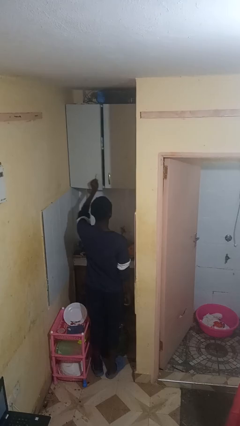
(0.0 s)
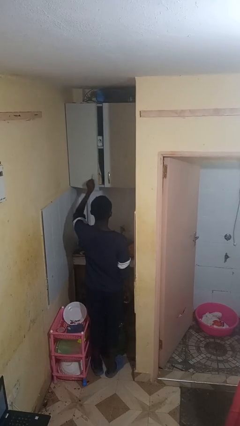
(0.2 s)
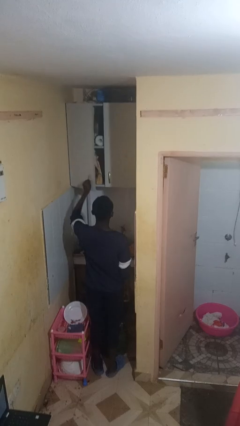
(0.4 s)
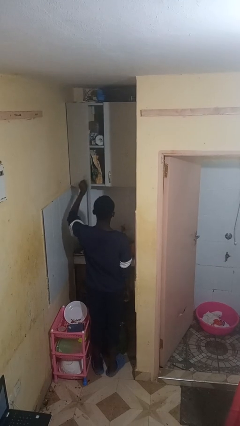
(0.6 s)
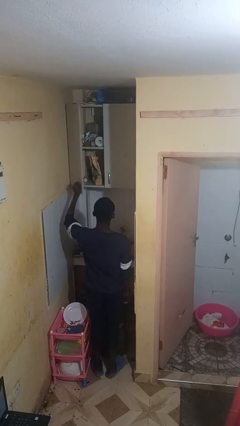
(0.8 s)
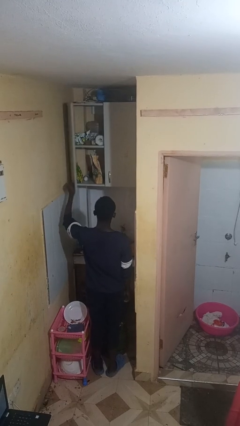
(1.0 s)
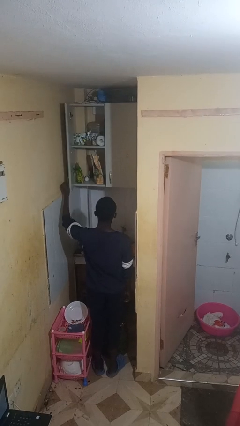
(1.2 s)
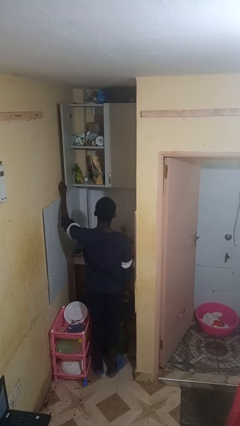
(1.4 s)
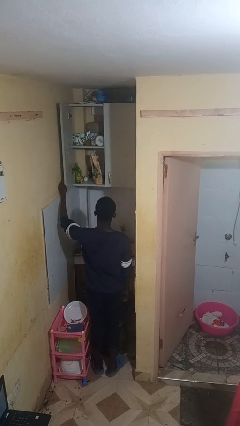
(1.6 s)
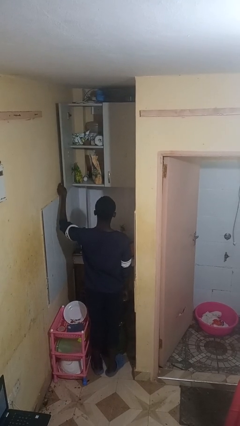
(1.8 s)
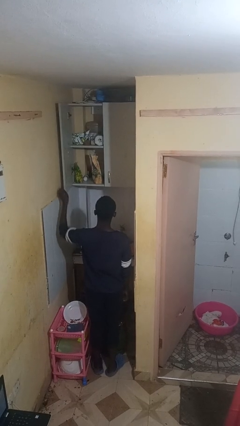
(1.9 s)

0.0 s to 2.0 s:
person opens cabinet

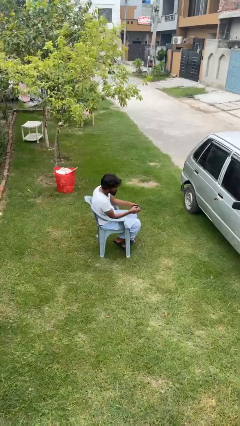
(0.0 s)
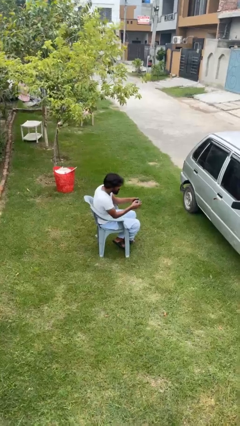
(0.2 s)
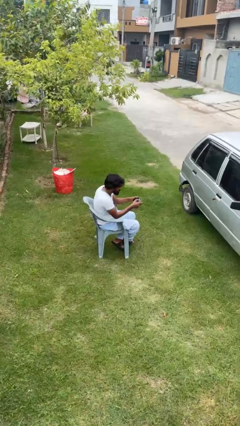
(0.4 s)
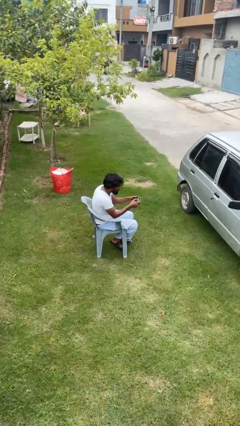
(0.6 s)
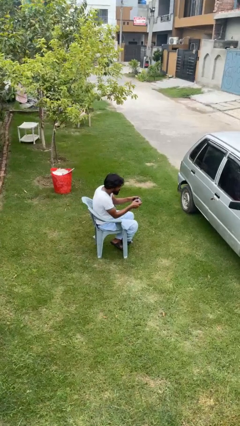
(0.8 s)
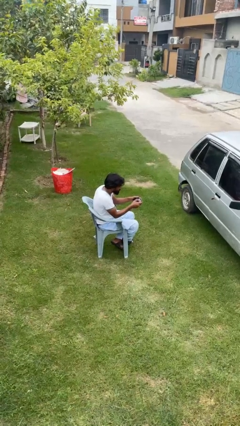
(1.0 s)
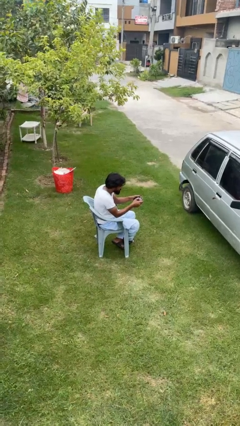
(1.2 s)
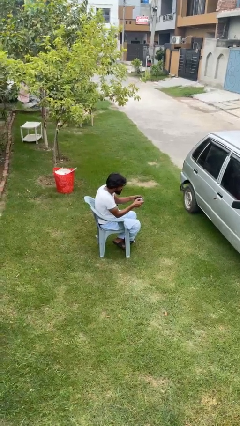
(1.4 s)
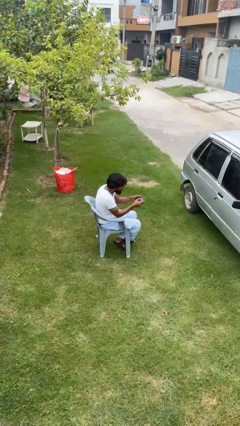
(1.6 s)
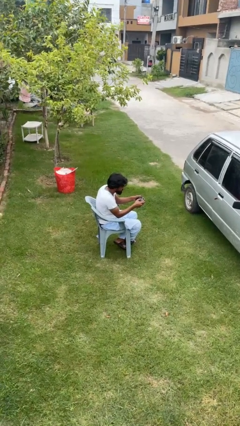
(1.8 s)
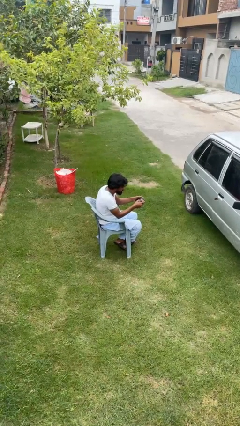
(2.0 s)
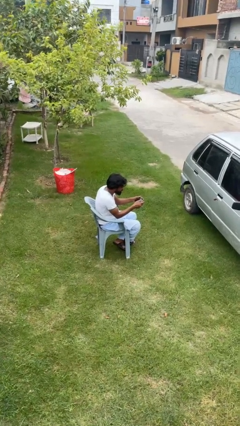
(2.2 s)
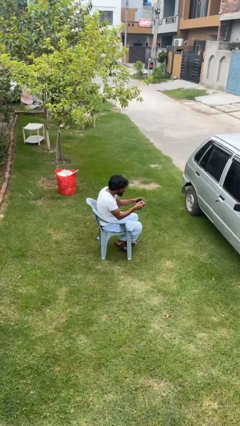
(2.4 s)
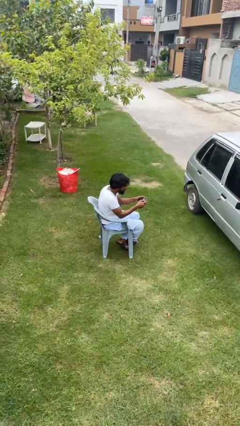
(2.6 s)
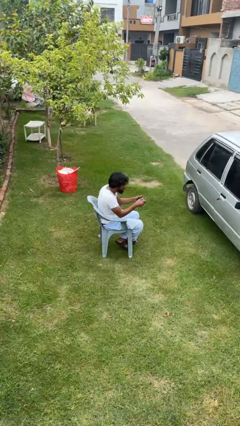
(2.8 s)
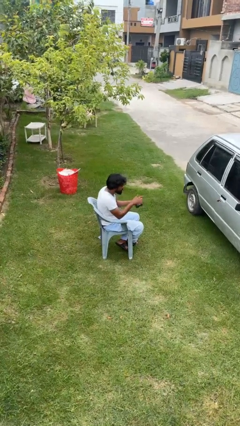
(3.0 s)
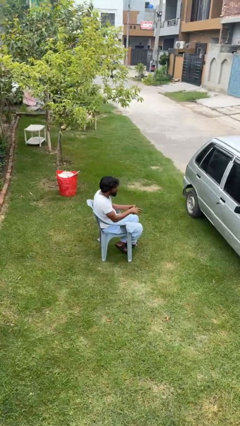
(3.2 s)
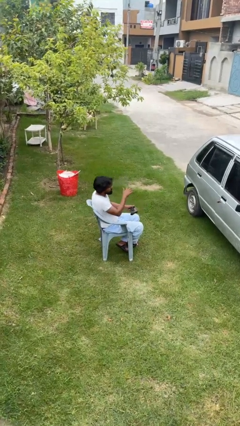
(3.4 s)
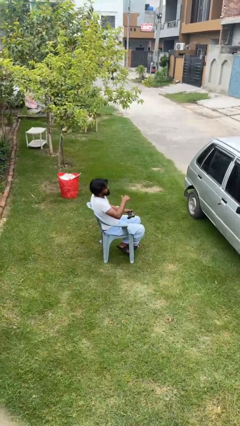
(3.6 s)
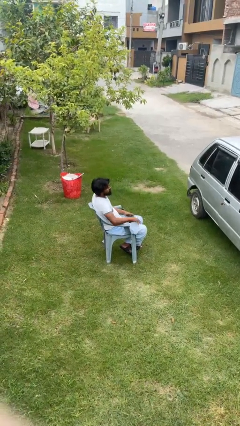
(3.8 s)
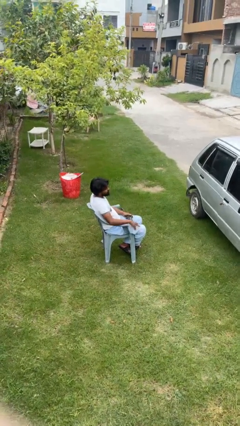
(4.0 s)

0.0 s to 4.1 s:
person interacts with handheld game

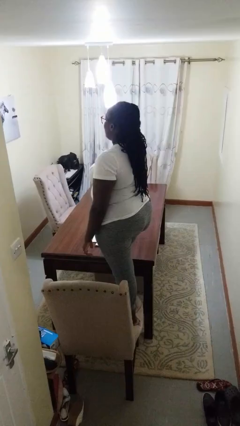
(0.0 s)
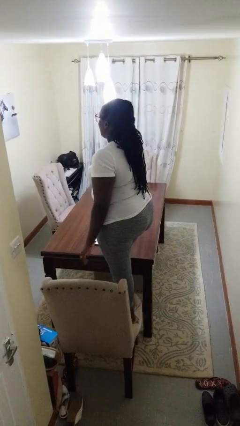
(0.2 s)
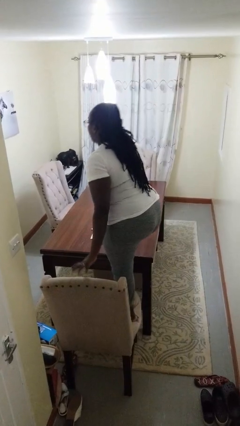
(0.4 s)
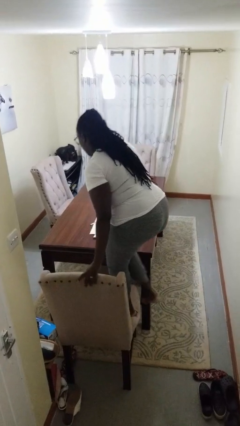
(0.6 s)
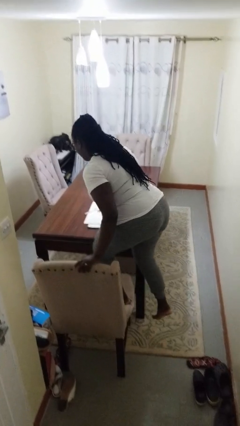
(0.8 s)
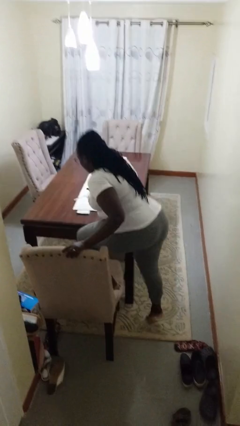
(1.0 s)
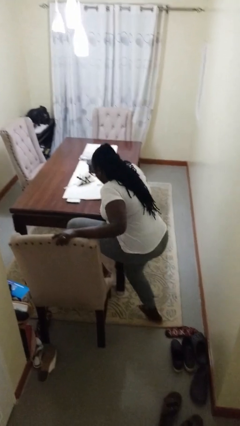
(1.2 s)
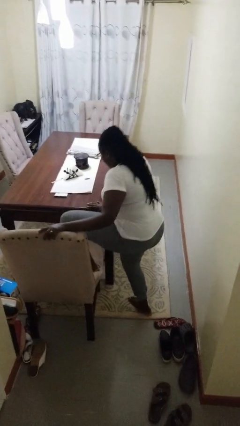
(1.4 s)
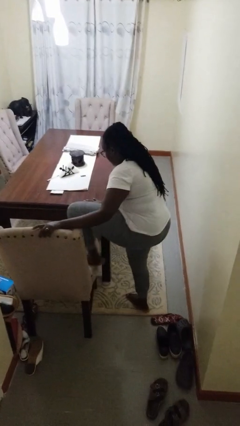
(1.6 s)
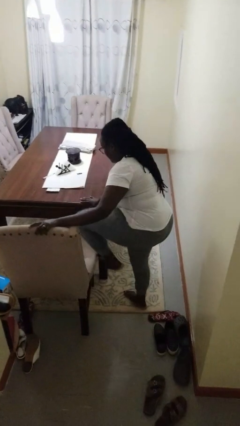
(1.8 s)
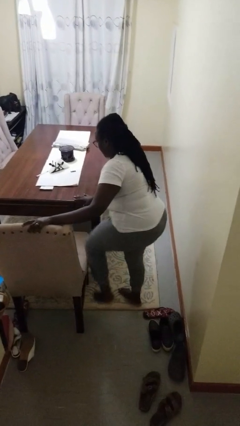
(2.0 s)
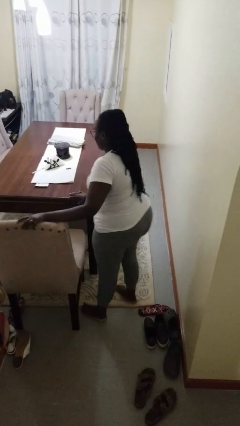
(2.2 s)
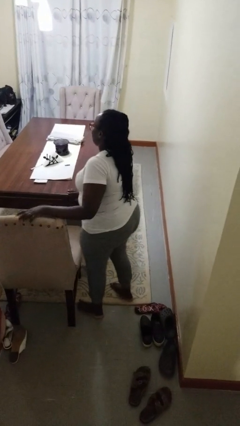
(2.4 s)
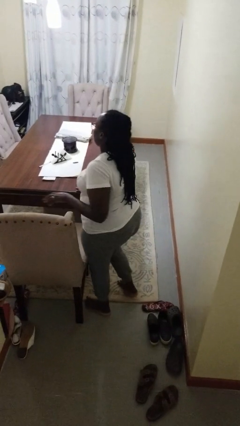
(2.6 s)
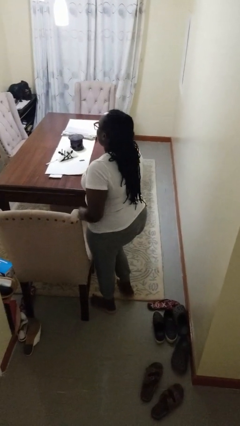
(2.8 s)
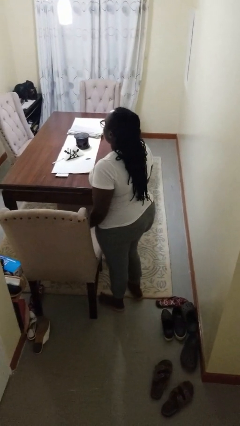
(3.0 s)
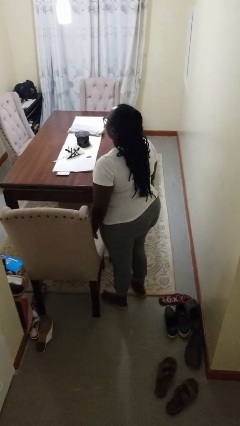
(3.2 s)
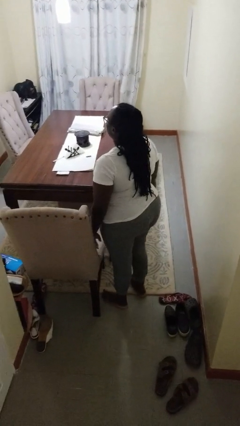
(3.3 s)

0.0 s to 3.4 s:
person climbs off chair

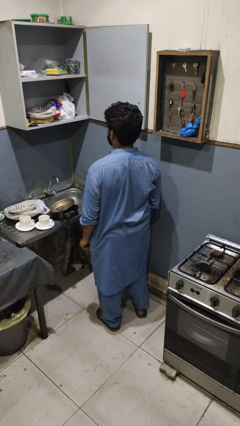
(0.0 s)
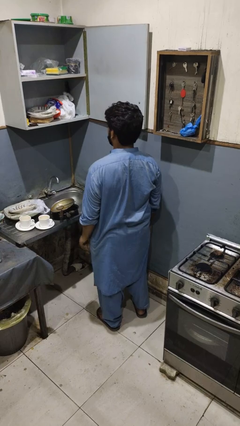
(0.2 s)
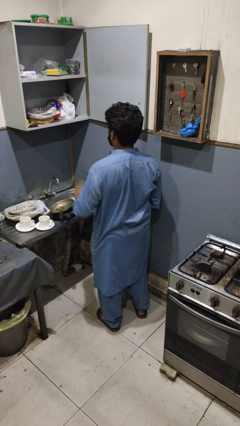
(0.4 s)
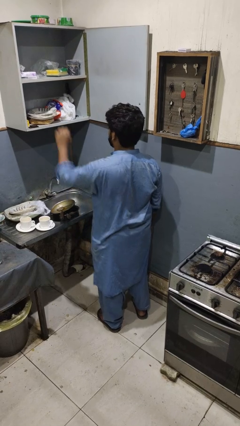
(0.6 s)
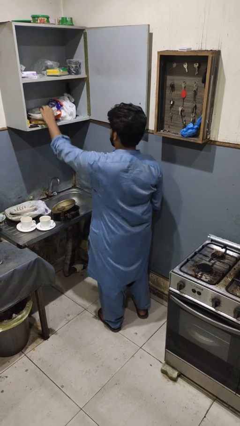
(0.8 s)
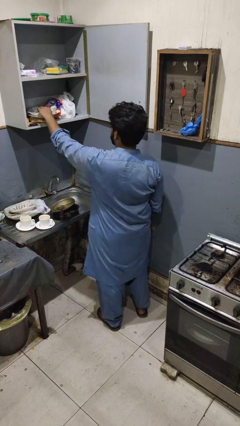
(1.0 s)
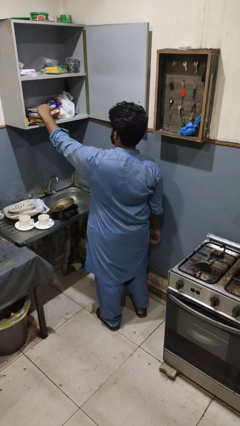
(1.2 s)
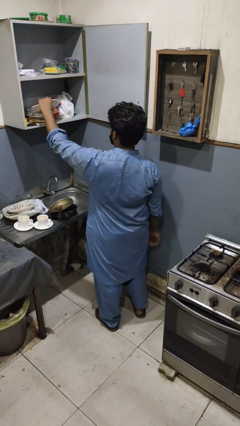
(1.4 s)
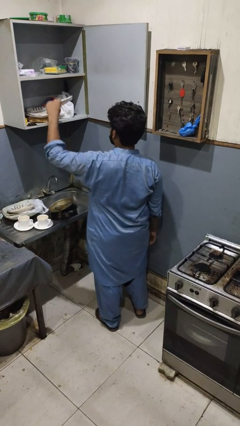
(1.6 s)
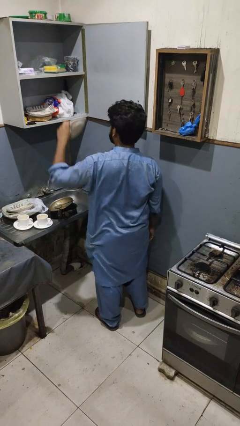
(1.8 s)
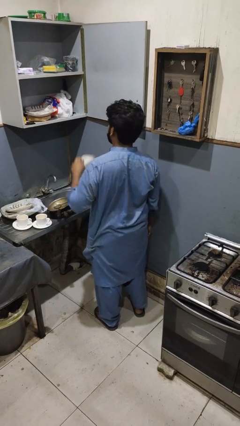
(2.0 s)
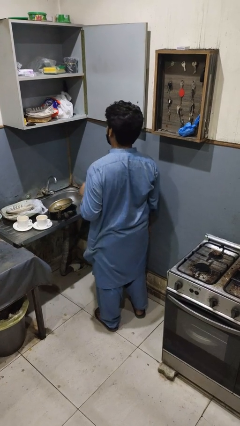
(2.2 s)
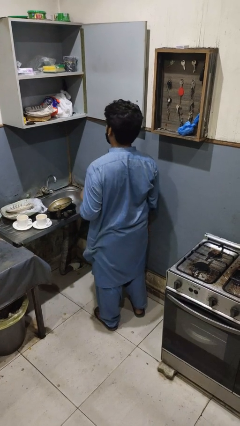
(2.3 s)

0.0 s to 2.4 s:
person takes object from cabinet

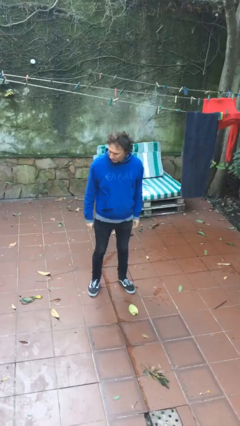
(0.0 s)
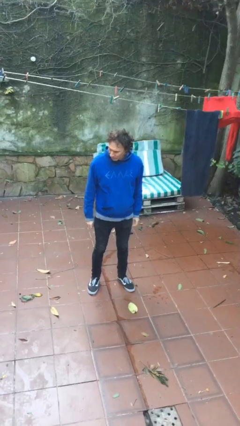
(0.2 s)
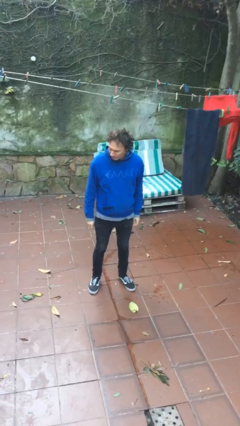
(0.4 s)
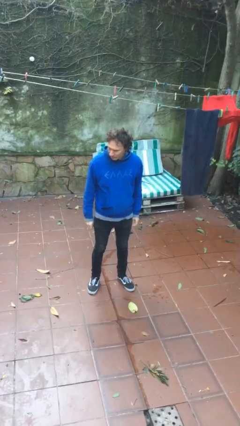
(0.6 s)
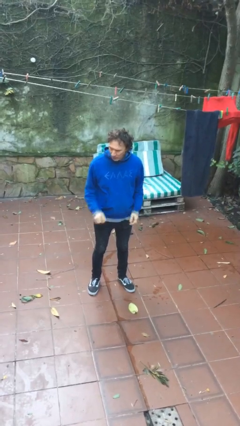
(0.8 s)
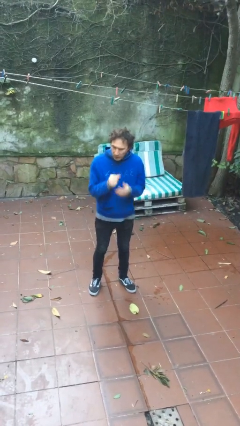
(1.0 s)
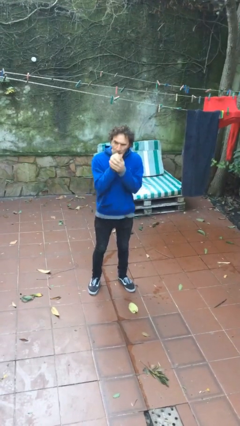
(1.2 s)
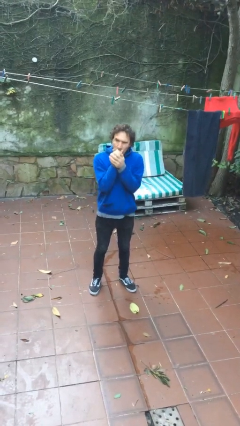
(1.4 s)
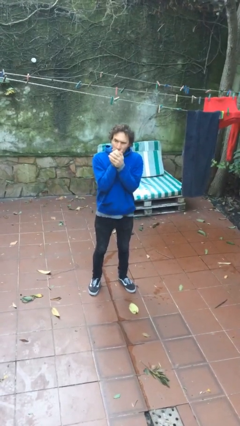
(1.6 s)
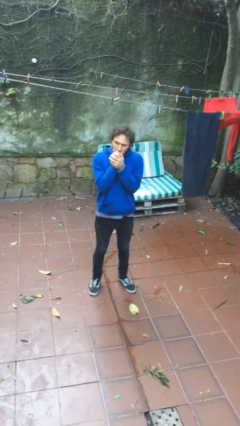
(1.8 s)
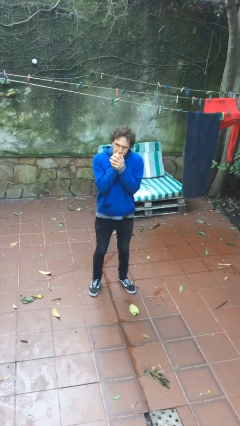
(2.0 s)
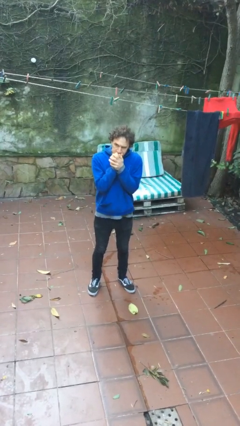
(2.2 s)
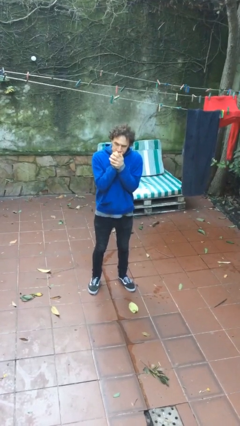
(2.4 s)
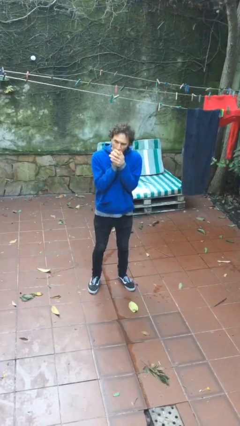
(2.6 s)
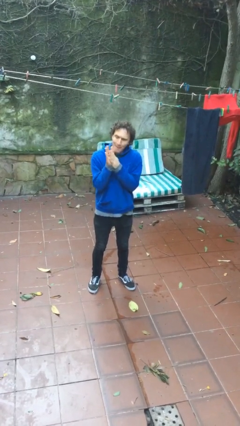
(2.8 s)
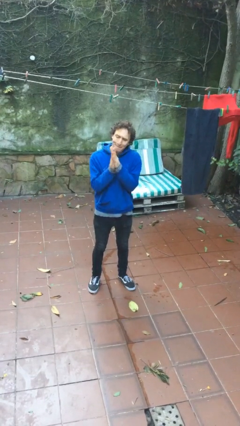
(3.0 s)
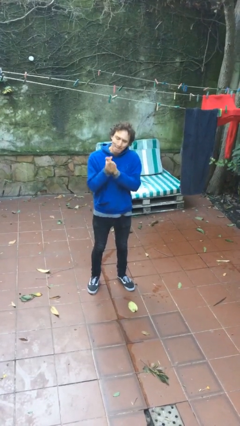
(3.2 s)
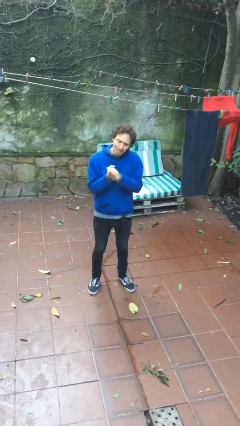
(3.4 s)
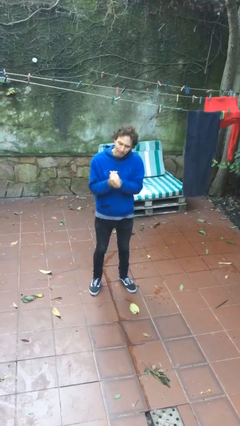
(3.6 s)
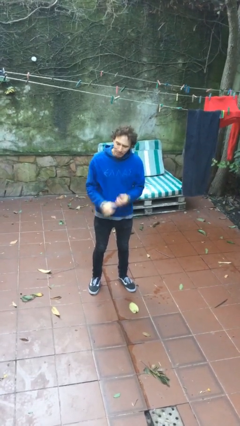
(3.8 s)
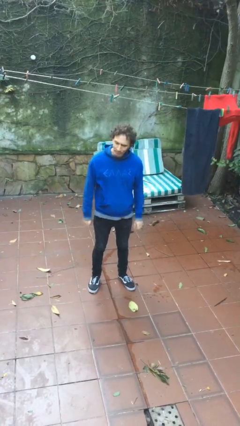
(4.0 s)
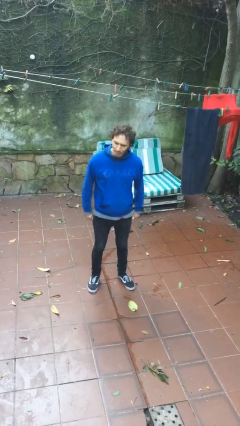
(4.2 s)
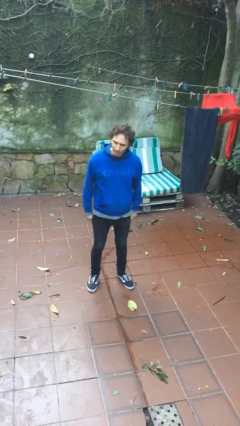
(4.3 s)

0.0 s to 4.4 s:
person blows into hands

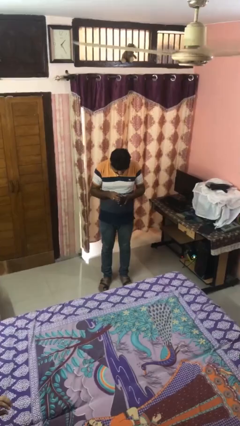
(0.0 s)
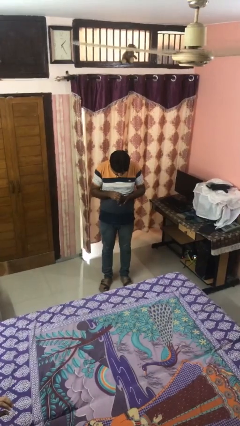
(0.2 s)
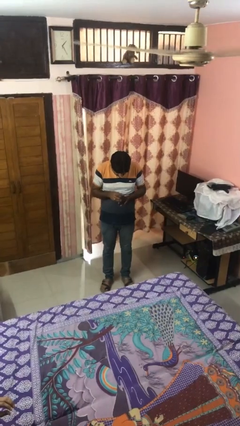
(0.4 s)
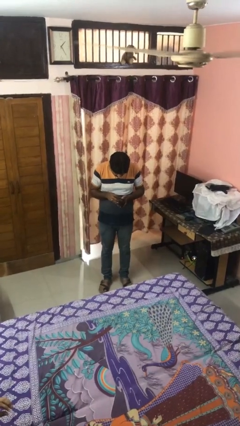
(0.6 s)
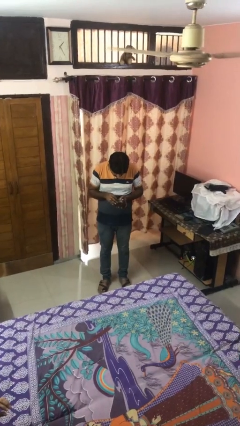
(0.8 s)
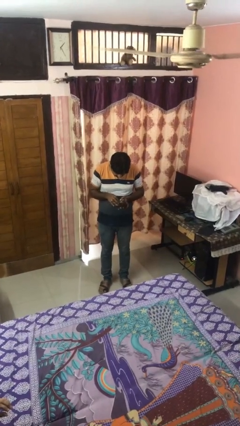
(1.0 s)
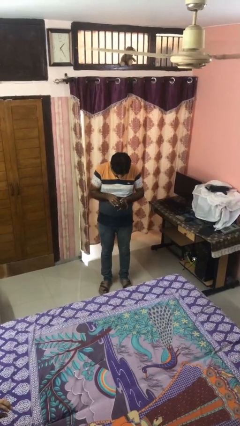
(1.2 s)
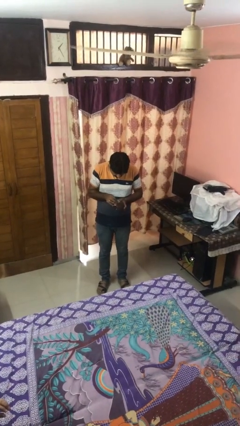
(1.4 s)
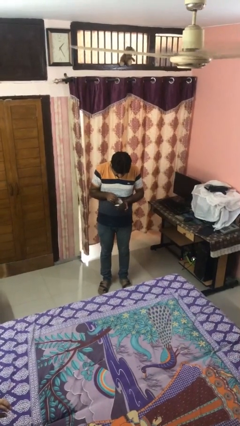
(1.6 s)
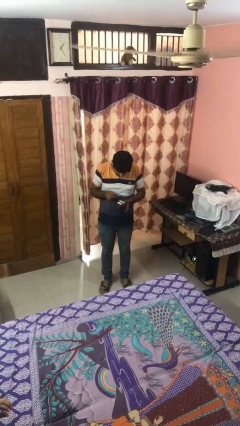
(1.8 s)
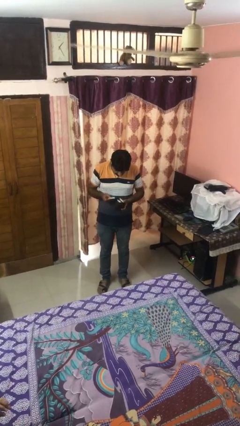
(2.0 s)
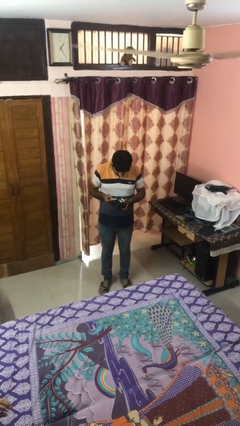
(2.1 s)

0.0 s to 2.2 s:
person takes object from purse
